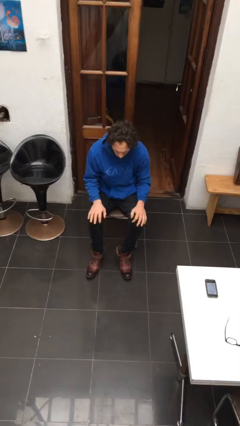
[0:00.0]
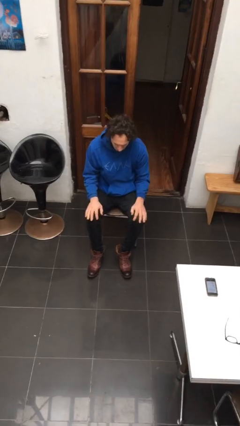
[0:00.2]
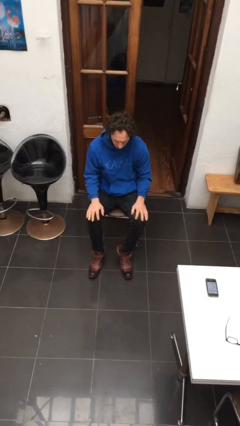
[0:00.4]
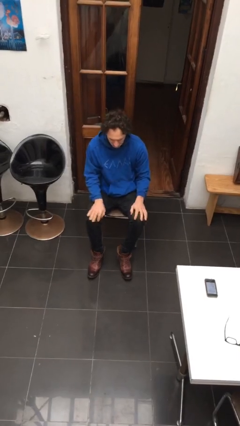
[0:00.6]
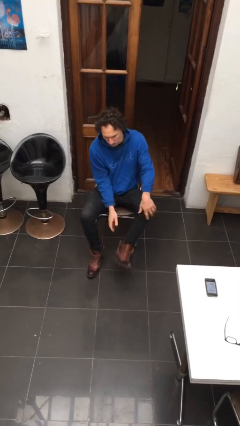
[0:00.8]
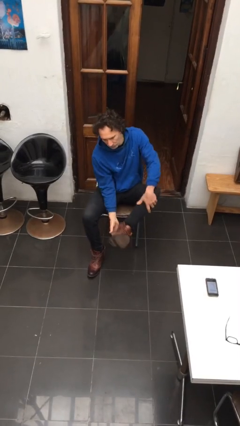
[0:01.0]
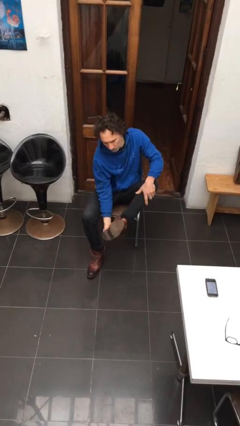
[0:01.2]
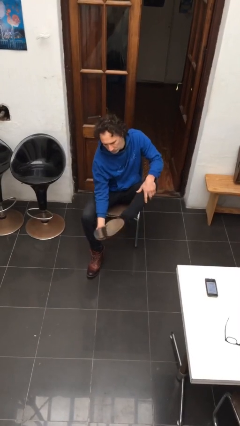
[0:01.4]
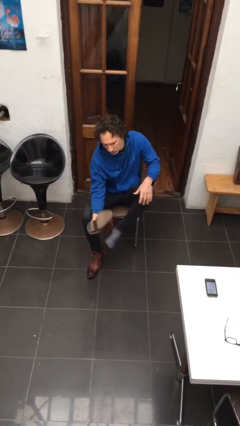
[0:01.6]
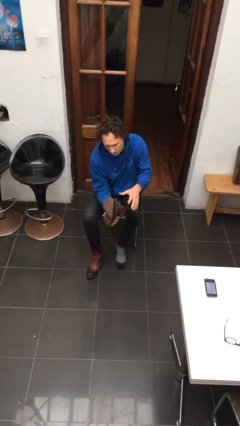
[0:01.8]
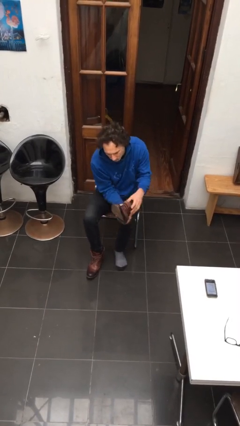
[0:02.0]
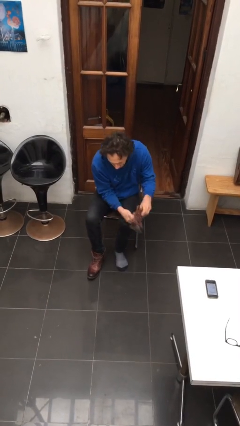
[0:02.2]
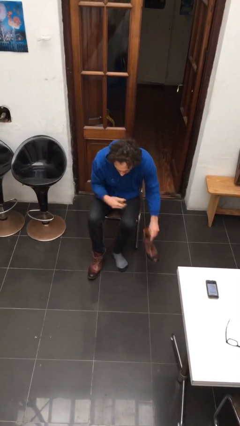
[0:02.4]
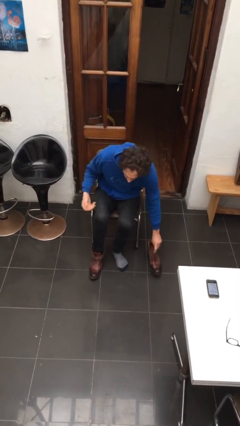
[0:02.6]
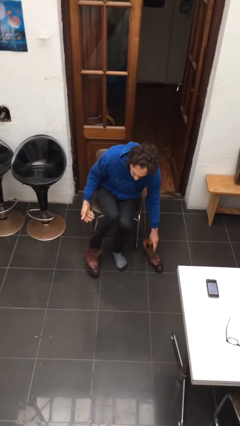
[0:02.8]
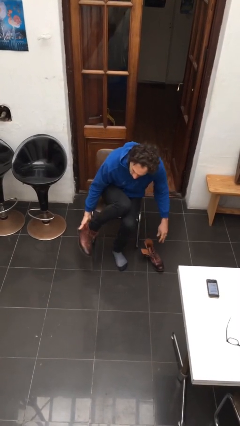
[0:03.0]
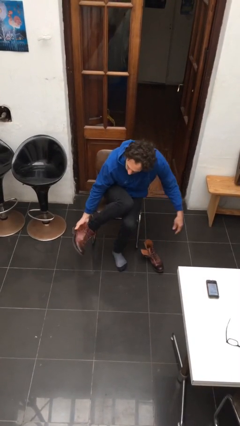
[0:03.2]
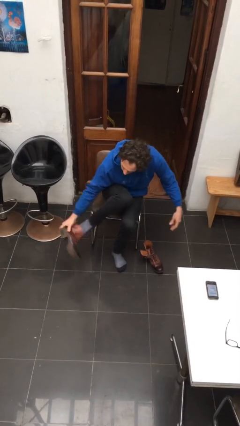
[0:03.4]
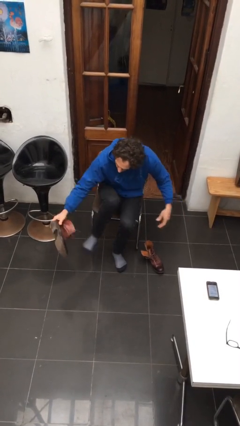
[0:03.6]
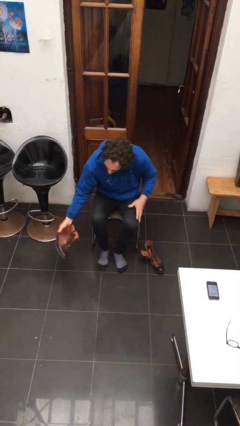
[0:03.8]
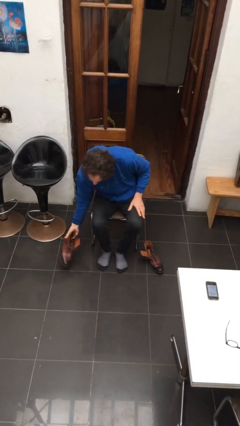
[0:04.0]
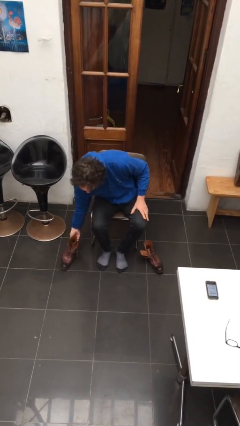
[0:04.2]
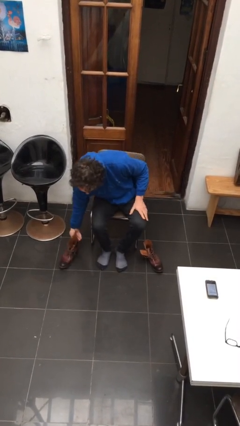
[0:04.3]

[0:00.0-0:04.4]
person takes off boots

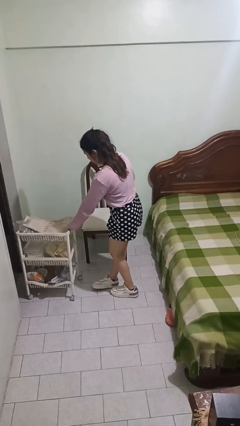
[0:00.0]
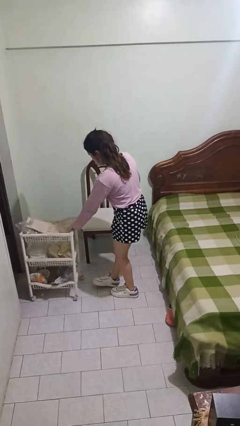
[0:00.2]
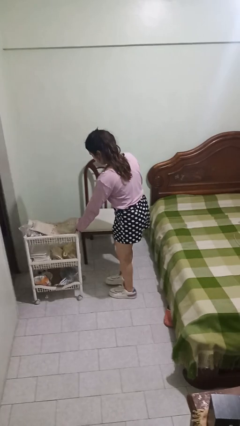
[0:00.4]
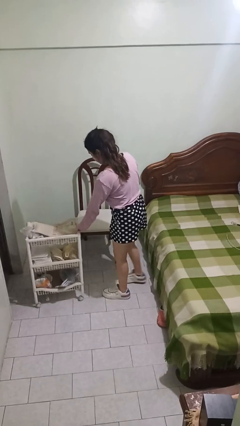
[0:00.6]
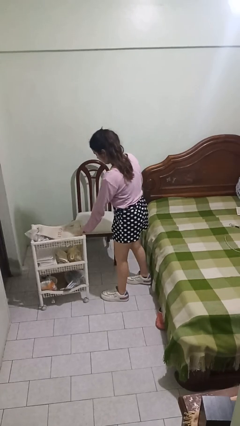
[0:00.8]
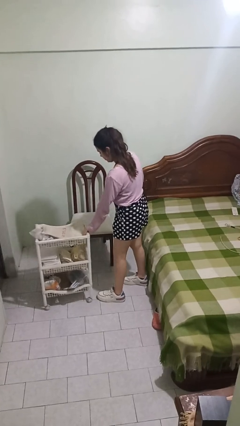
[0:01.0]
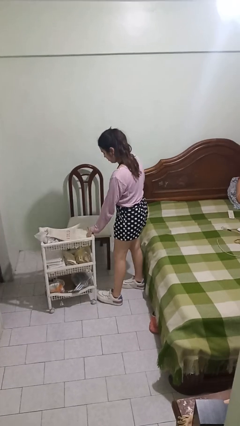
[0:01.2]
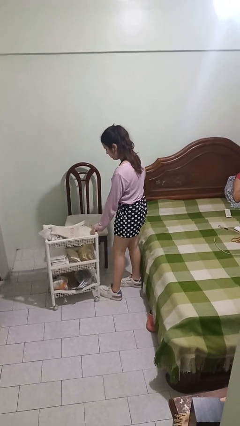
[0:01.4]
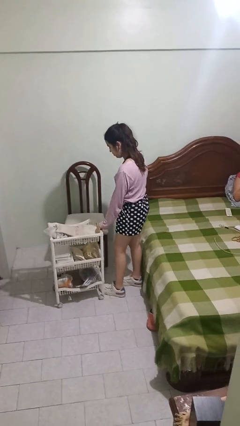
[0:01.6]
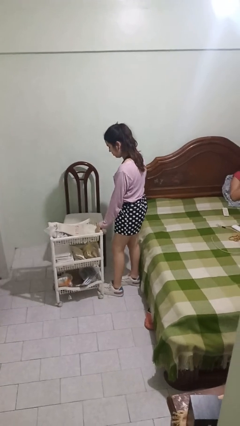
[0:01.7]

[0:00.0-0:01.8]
person pulls wheeled cart

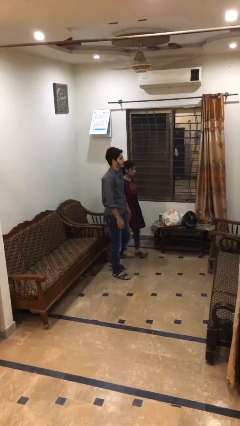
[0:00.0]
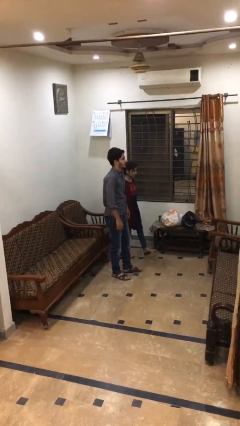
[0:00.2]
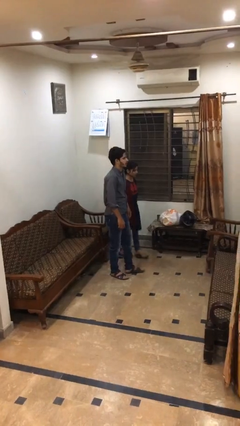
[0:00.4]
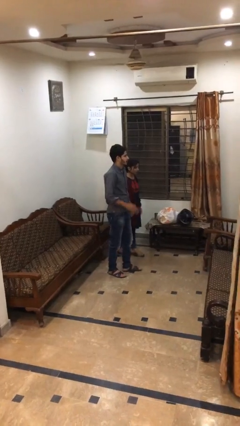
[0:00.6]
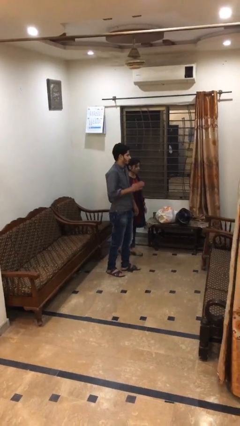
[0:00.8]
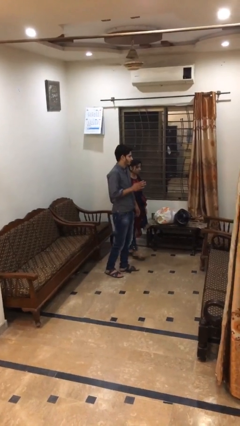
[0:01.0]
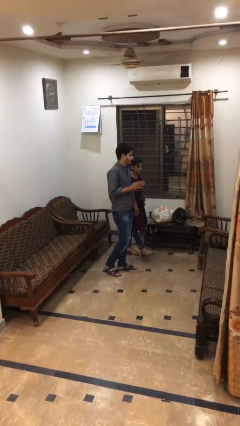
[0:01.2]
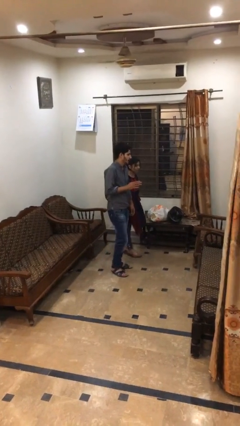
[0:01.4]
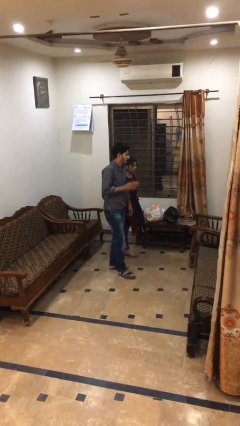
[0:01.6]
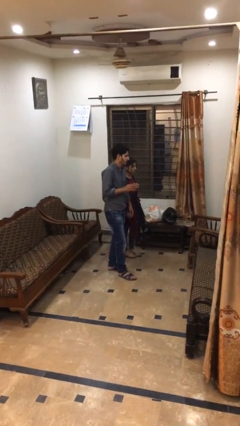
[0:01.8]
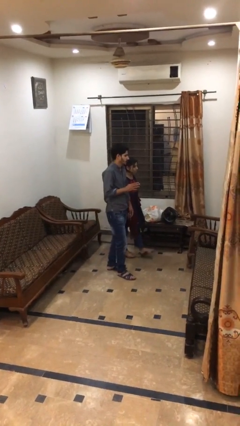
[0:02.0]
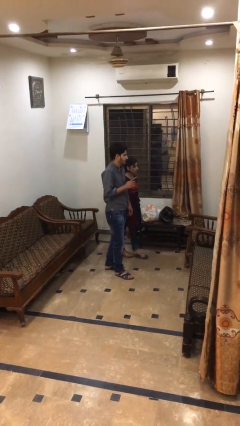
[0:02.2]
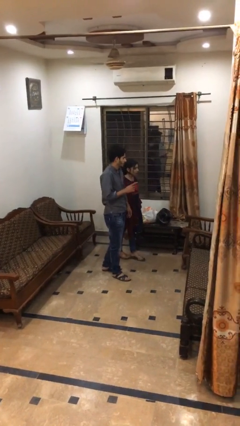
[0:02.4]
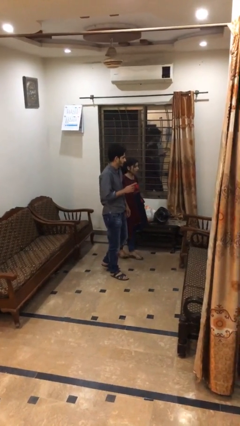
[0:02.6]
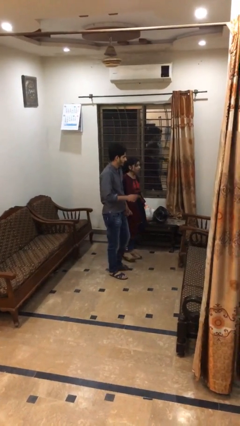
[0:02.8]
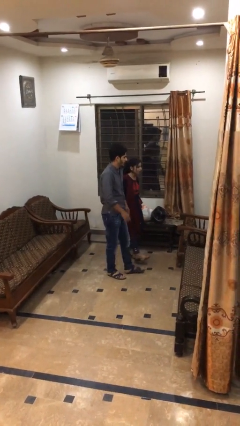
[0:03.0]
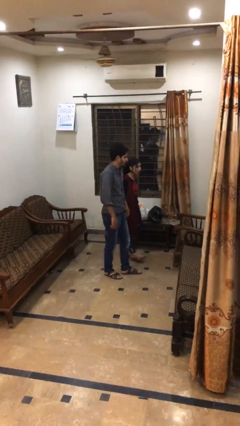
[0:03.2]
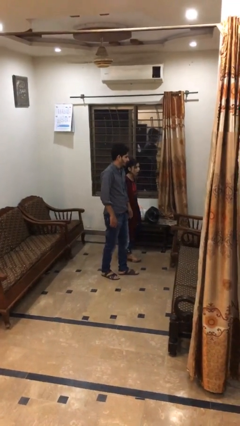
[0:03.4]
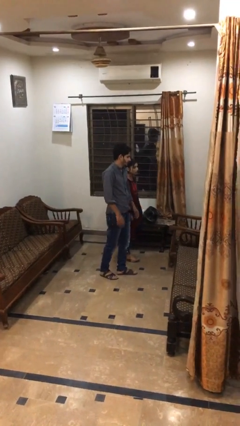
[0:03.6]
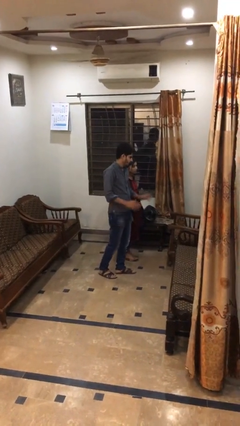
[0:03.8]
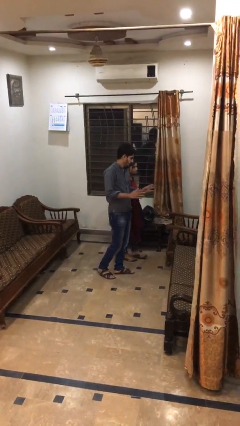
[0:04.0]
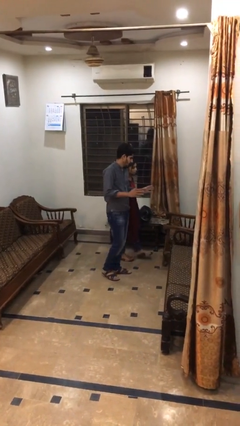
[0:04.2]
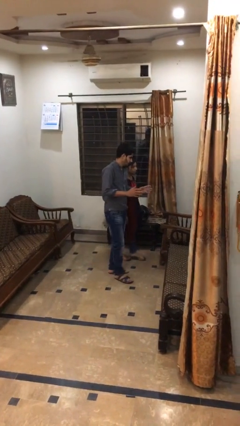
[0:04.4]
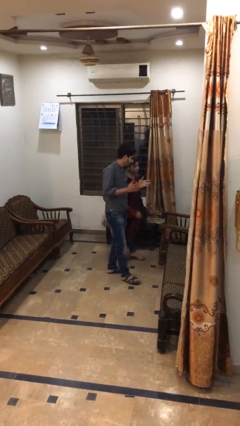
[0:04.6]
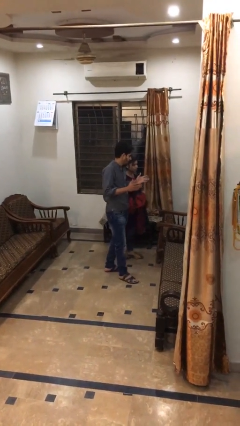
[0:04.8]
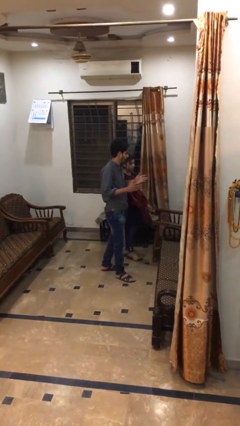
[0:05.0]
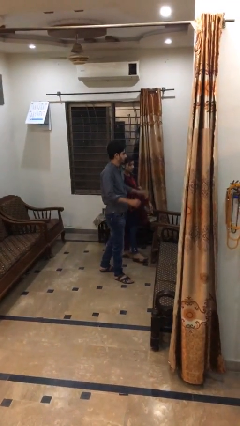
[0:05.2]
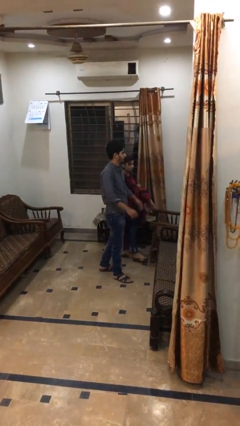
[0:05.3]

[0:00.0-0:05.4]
person talks to person

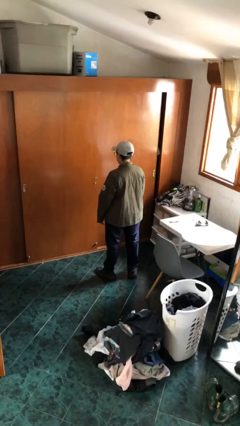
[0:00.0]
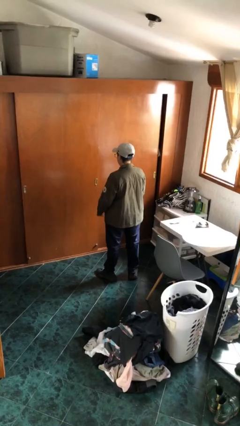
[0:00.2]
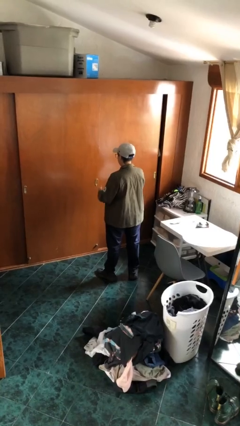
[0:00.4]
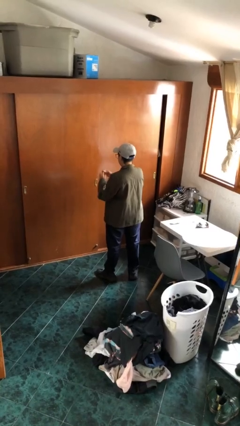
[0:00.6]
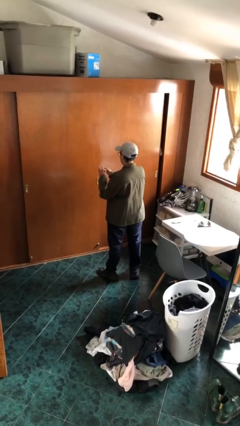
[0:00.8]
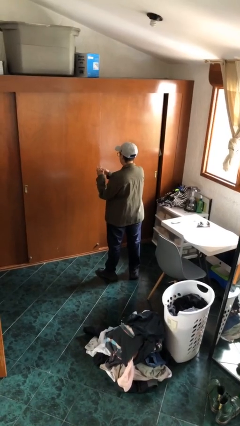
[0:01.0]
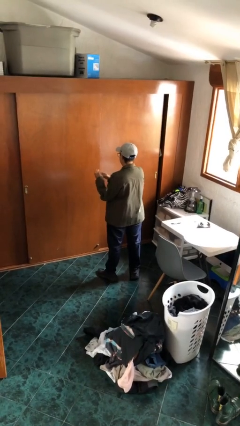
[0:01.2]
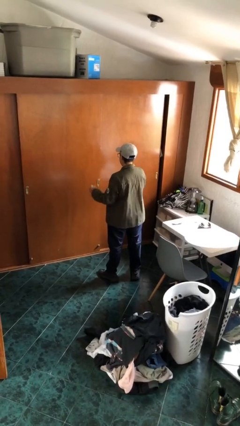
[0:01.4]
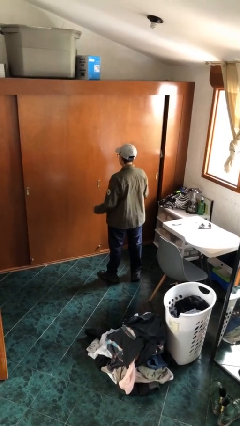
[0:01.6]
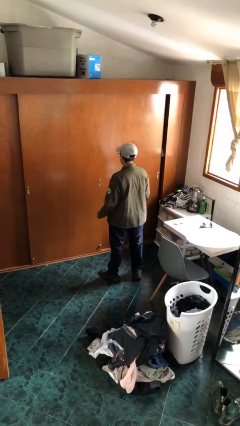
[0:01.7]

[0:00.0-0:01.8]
person puts on ring

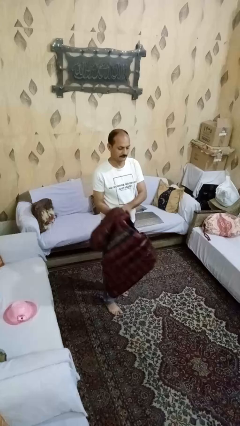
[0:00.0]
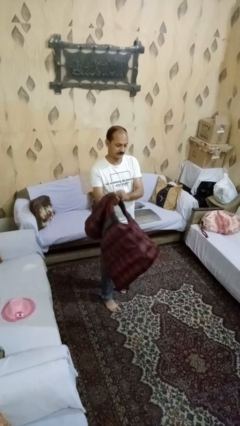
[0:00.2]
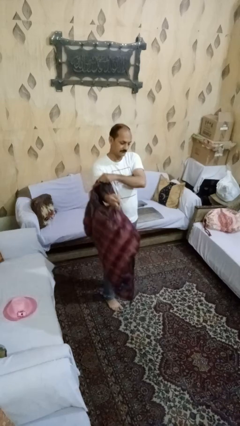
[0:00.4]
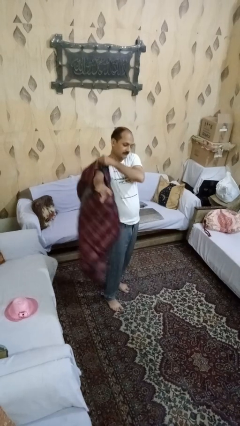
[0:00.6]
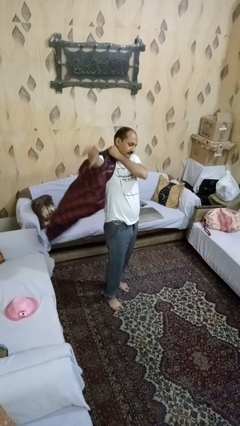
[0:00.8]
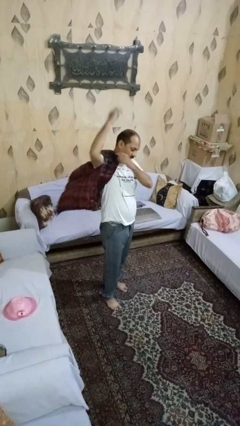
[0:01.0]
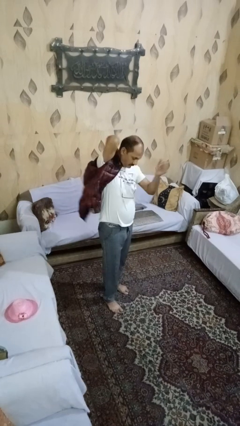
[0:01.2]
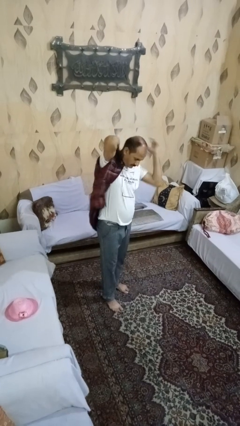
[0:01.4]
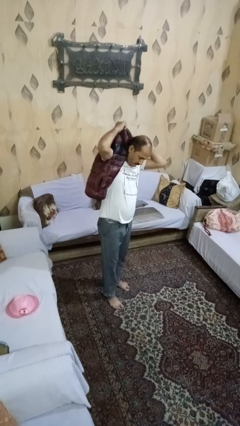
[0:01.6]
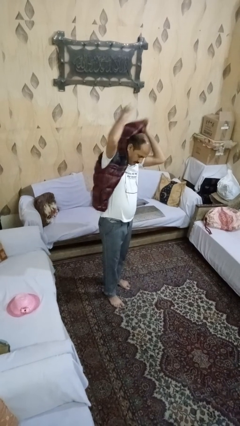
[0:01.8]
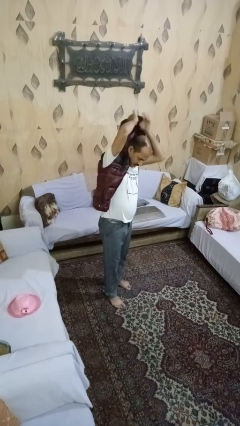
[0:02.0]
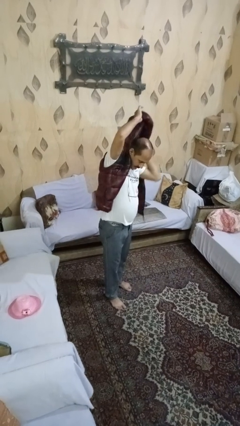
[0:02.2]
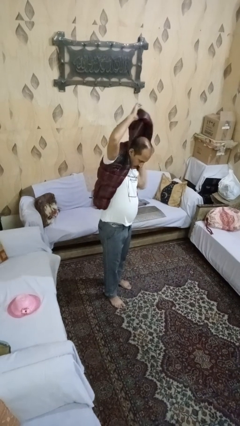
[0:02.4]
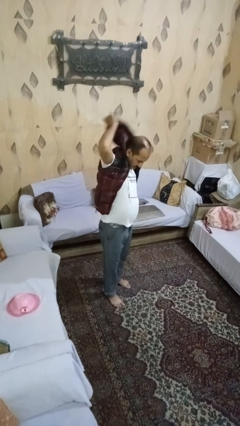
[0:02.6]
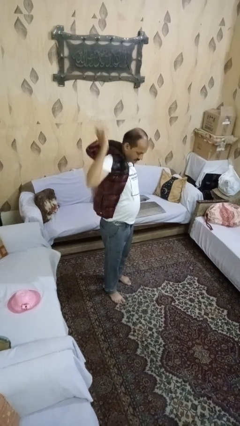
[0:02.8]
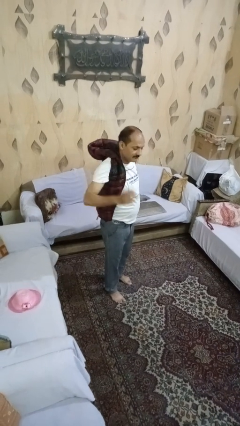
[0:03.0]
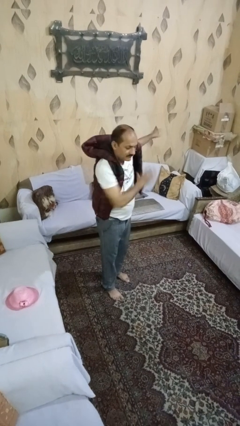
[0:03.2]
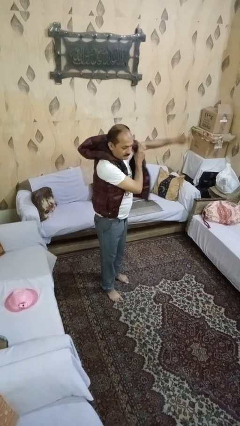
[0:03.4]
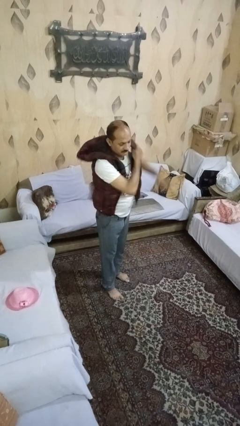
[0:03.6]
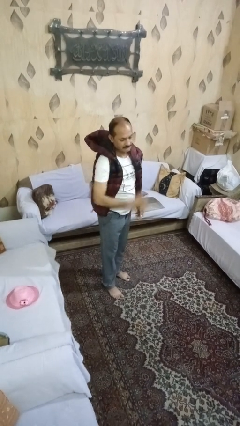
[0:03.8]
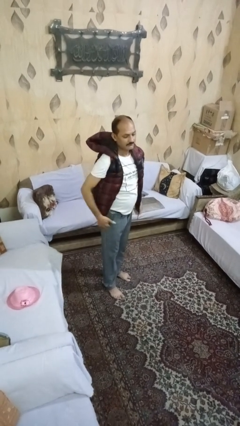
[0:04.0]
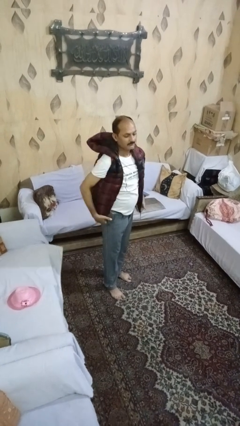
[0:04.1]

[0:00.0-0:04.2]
person puts on jacket
